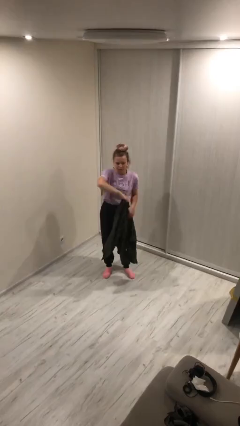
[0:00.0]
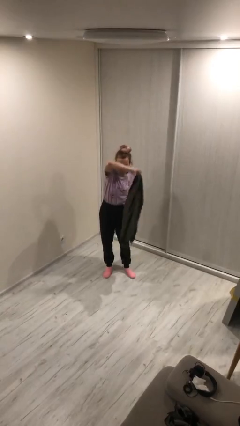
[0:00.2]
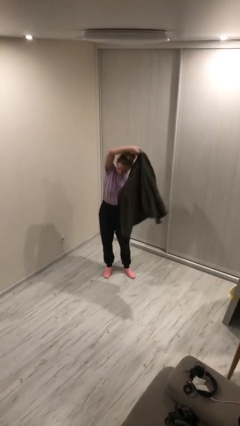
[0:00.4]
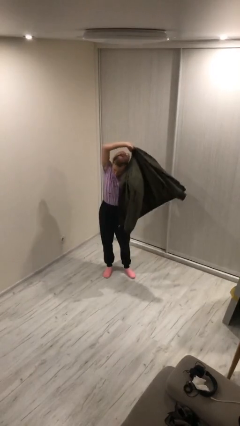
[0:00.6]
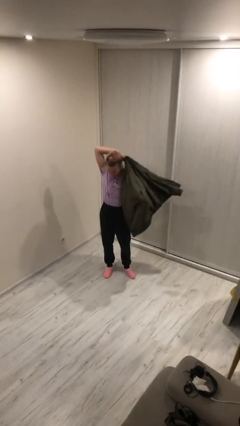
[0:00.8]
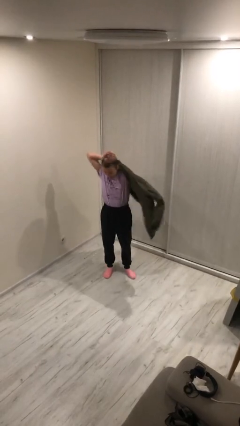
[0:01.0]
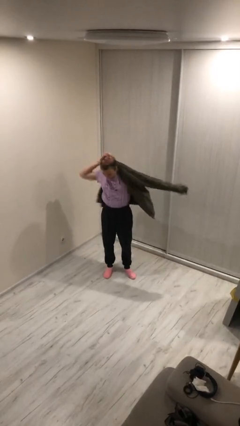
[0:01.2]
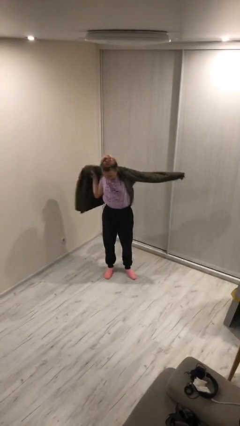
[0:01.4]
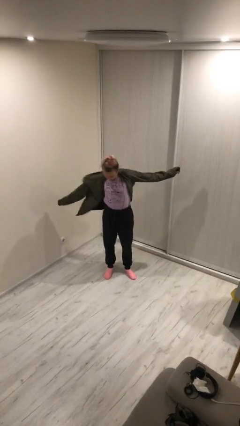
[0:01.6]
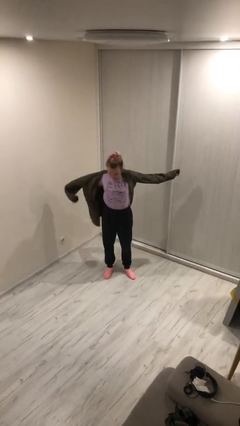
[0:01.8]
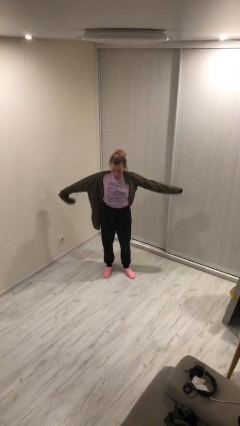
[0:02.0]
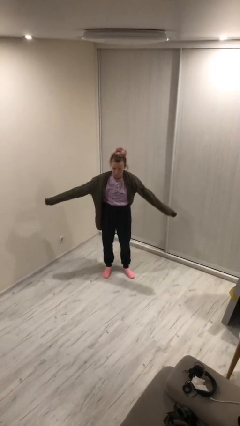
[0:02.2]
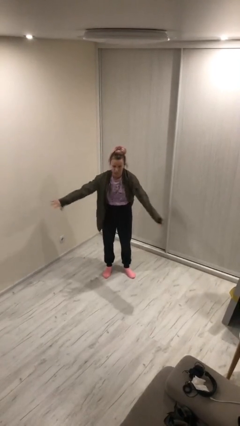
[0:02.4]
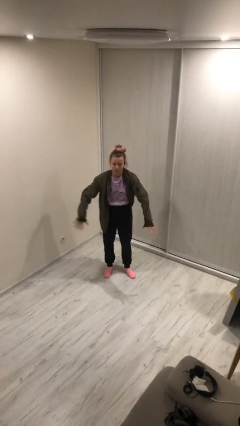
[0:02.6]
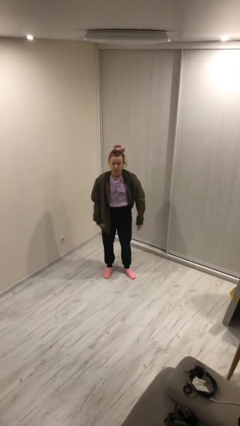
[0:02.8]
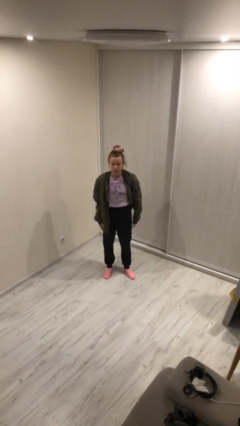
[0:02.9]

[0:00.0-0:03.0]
person puts on jacket

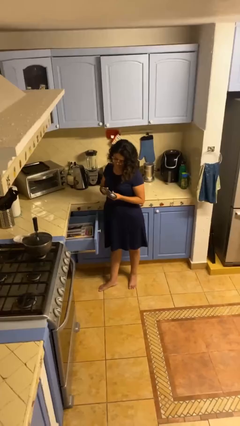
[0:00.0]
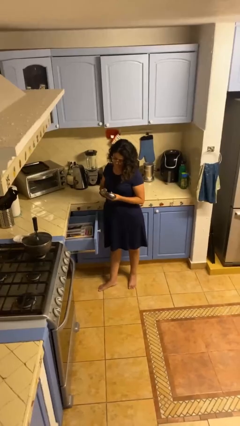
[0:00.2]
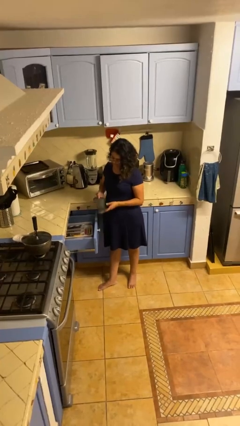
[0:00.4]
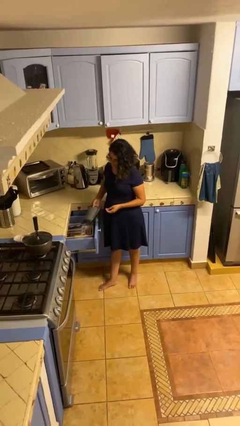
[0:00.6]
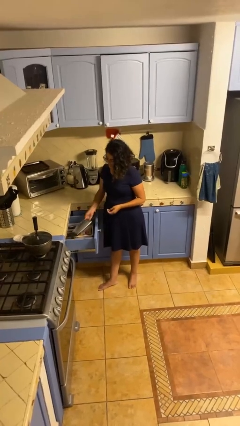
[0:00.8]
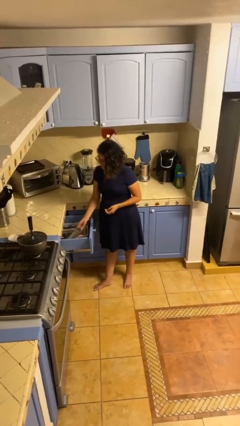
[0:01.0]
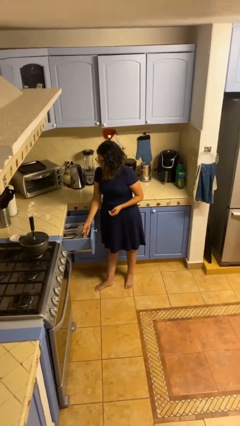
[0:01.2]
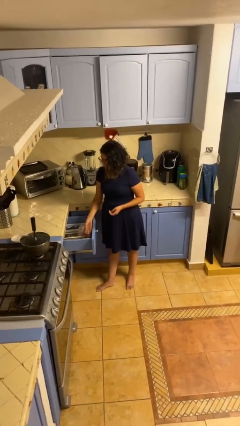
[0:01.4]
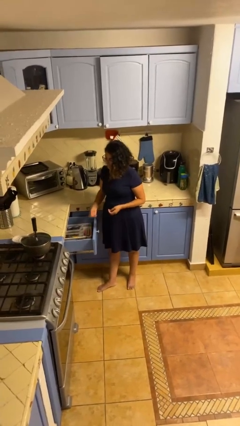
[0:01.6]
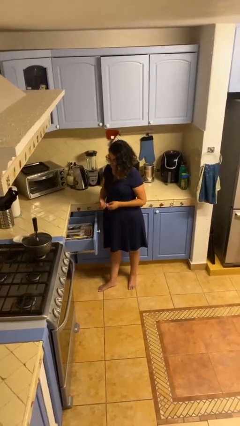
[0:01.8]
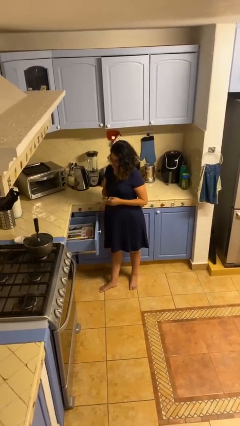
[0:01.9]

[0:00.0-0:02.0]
person puts object into kitchen drawer

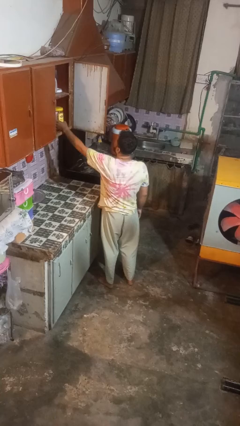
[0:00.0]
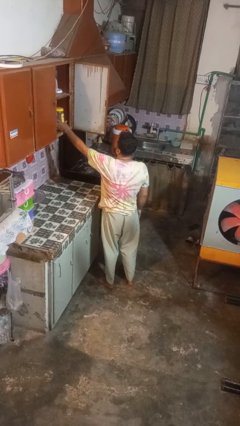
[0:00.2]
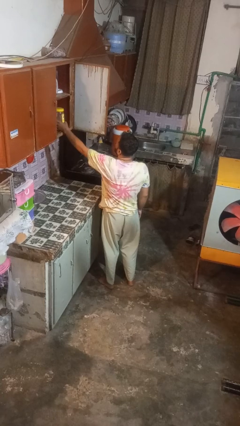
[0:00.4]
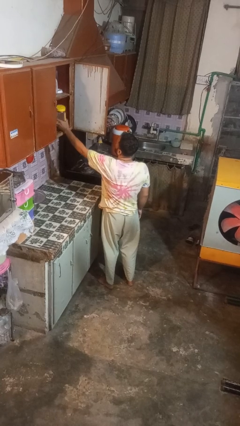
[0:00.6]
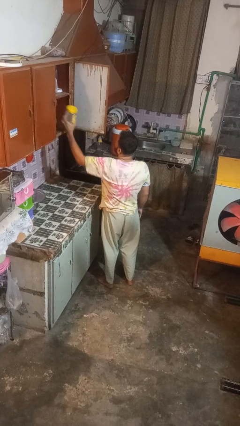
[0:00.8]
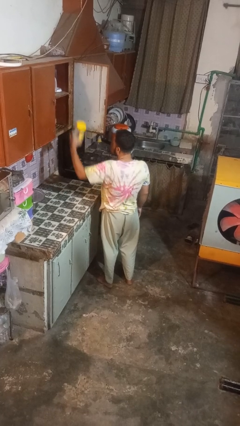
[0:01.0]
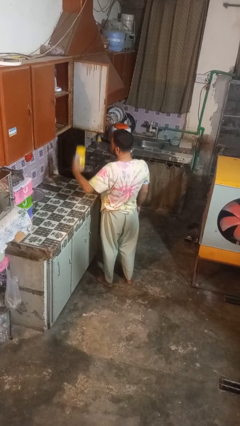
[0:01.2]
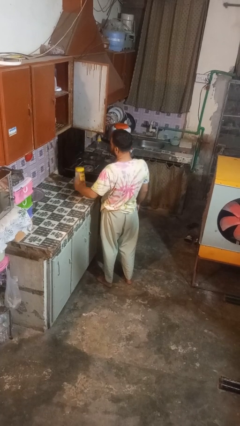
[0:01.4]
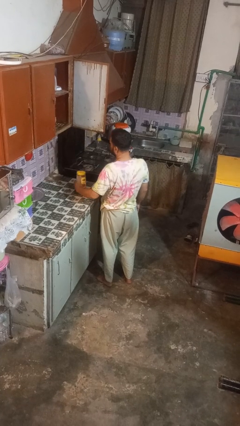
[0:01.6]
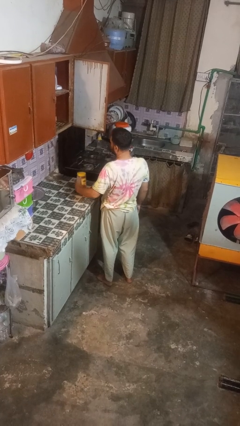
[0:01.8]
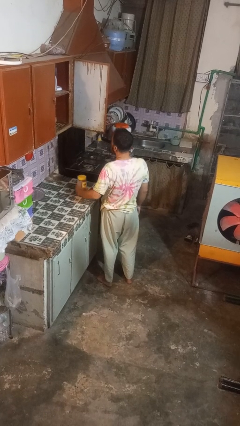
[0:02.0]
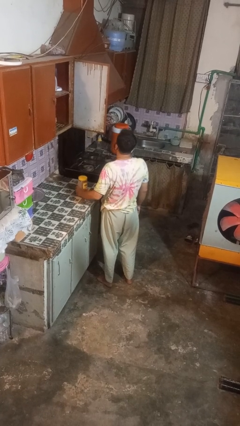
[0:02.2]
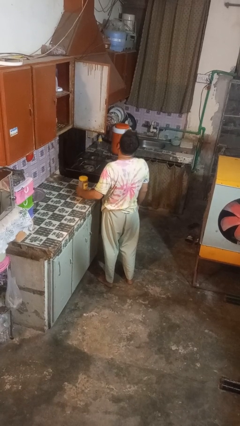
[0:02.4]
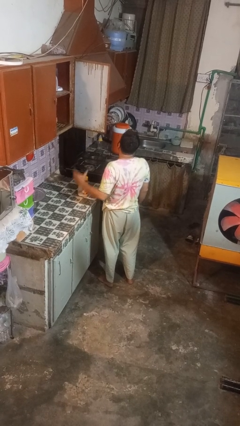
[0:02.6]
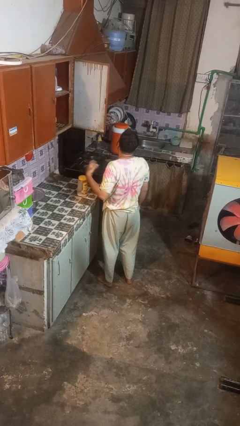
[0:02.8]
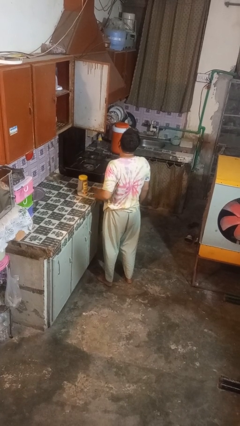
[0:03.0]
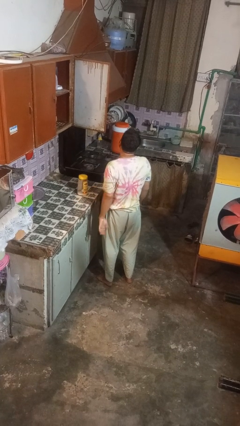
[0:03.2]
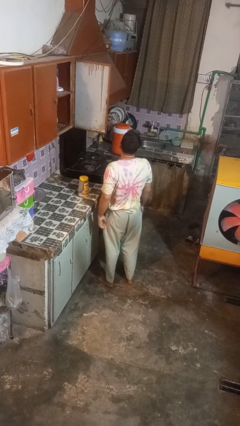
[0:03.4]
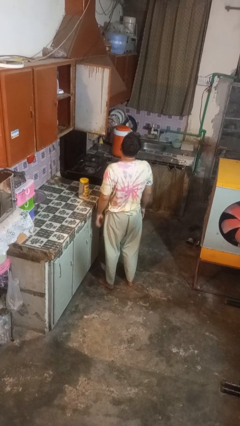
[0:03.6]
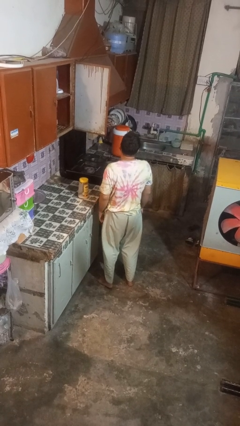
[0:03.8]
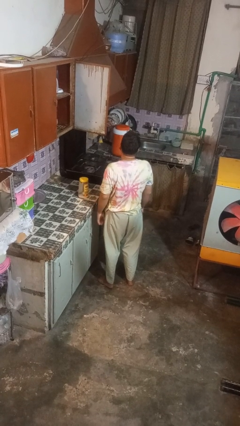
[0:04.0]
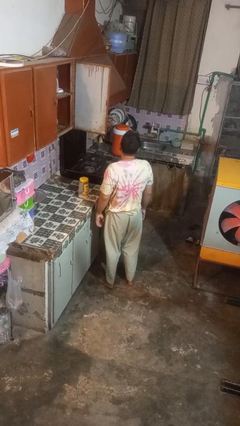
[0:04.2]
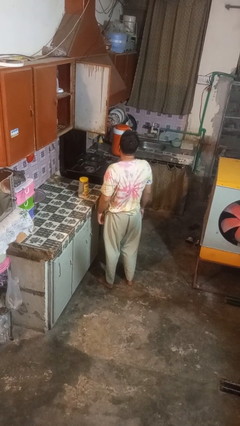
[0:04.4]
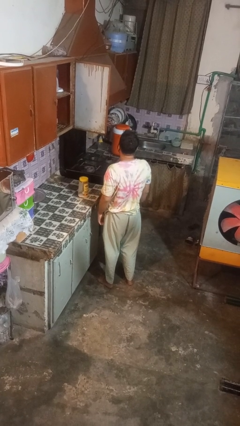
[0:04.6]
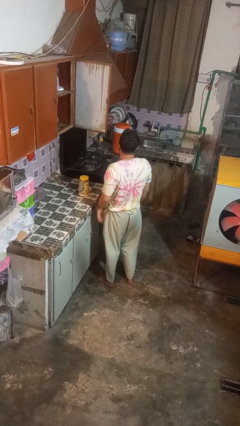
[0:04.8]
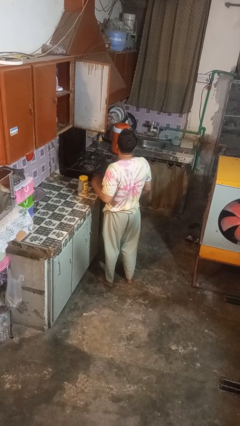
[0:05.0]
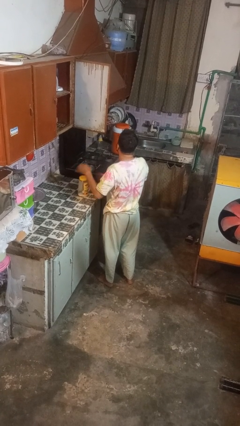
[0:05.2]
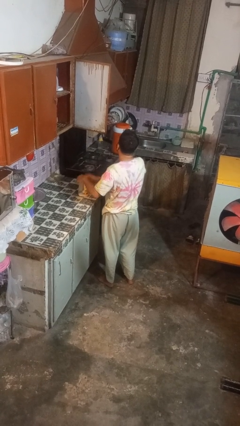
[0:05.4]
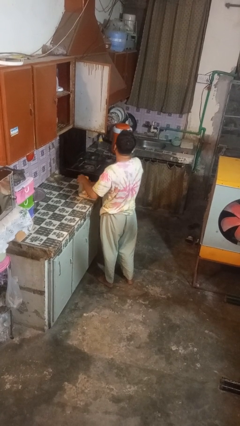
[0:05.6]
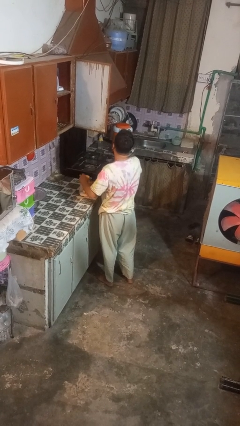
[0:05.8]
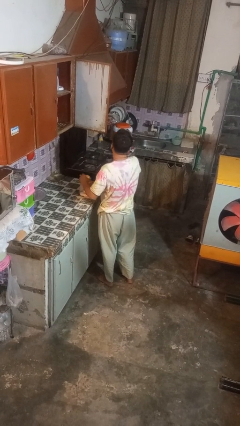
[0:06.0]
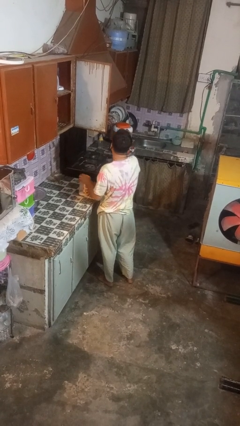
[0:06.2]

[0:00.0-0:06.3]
person takes object from cabinet

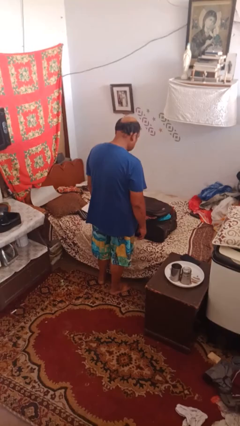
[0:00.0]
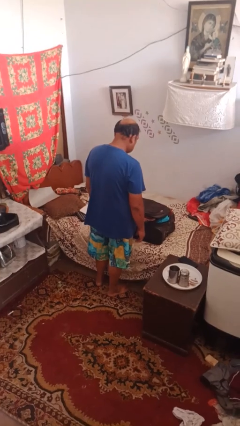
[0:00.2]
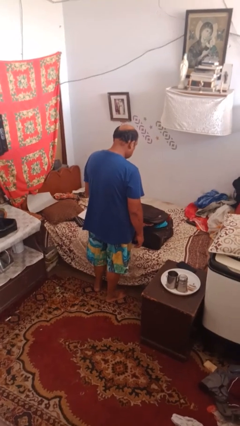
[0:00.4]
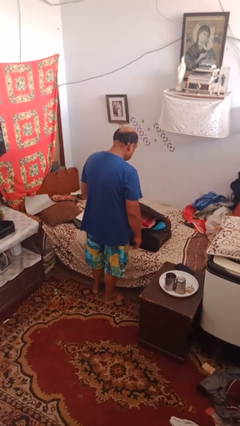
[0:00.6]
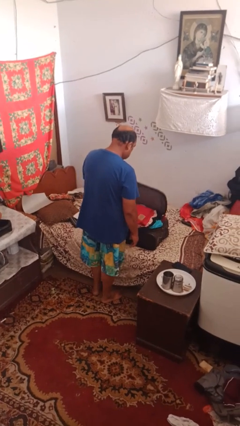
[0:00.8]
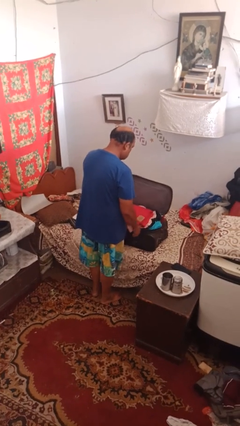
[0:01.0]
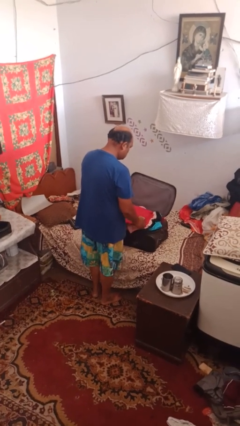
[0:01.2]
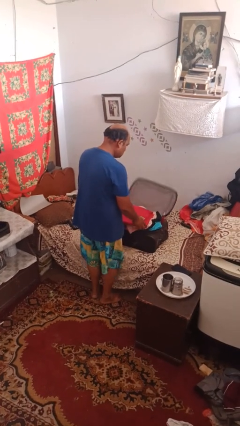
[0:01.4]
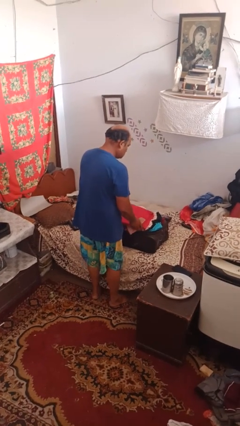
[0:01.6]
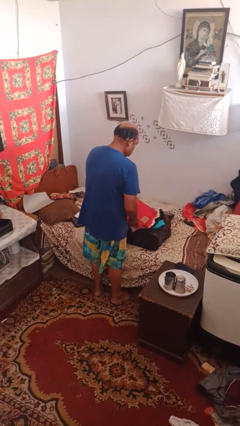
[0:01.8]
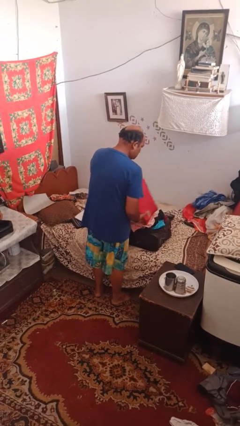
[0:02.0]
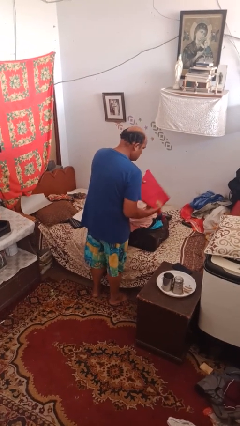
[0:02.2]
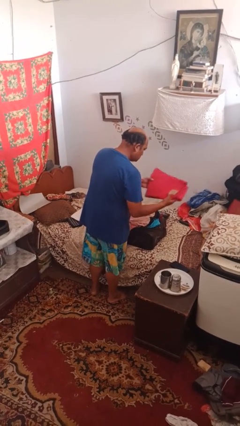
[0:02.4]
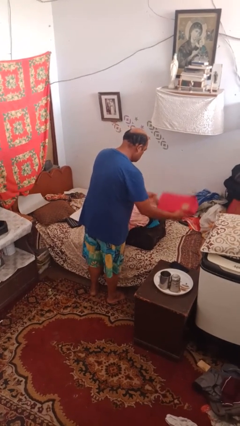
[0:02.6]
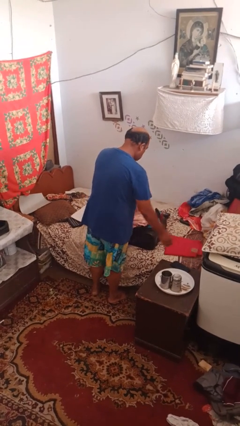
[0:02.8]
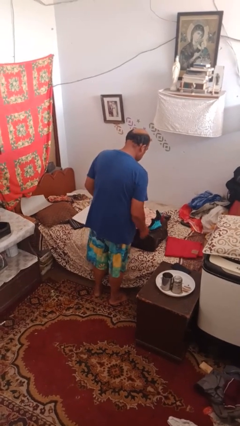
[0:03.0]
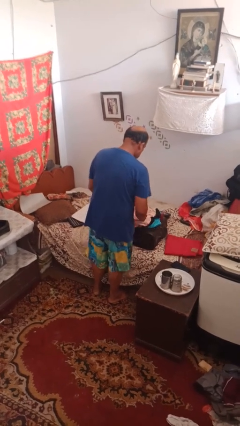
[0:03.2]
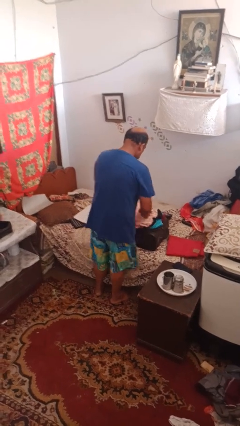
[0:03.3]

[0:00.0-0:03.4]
person unloads clothes from suitcase

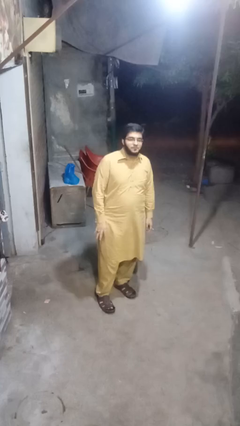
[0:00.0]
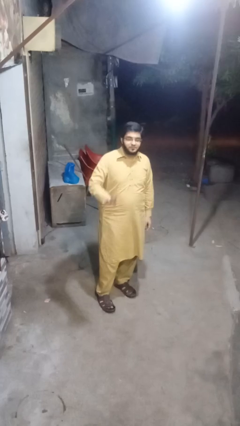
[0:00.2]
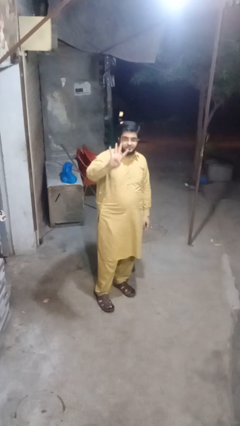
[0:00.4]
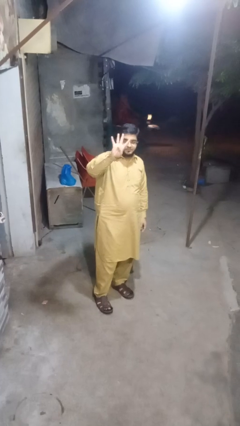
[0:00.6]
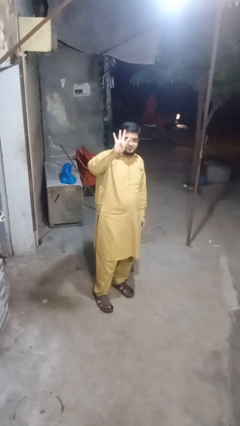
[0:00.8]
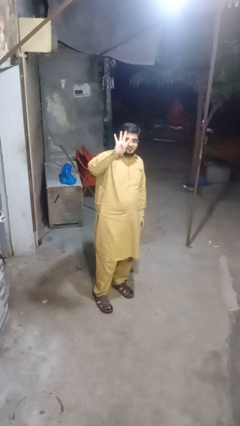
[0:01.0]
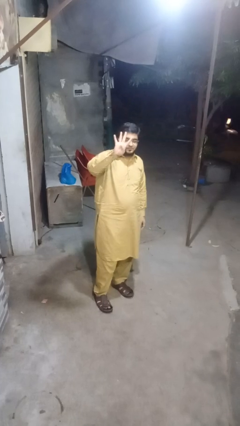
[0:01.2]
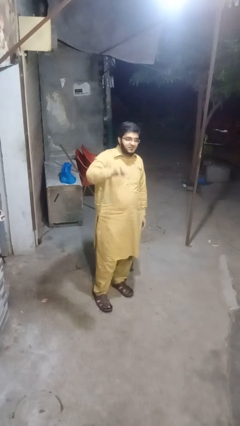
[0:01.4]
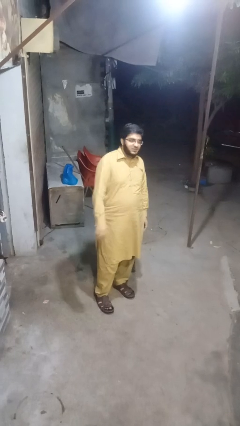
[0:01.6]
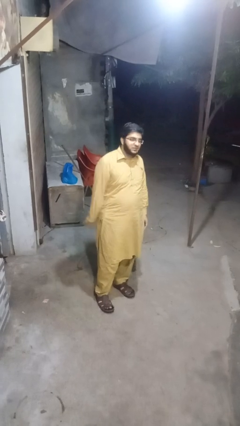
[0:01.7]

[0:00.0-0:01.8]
person gestures number four

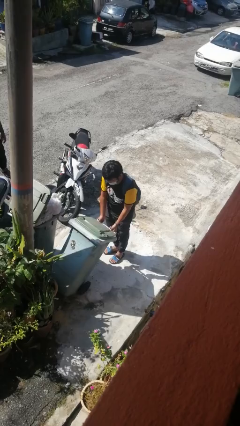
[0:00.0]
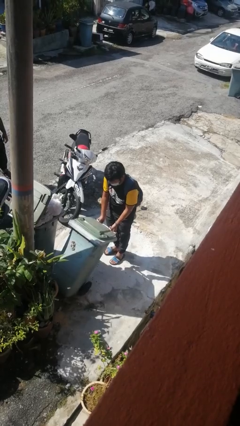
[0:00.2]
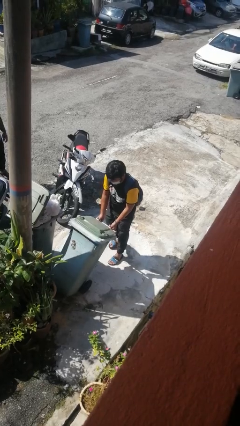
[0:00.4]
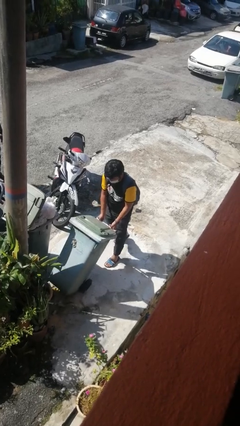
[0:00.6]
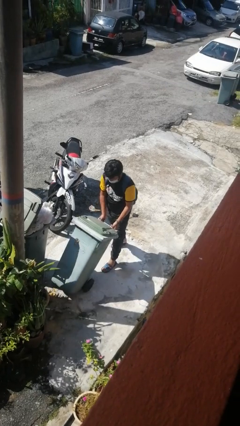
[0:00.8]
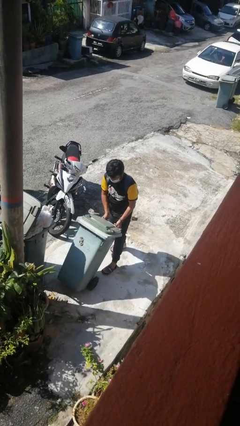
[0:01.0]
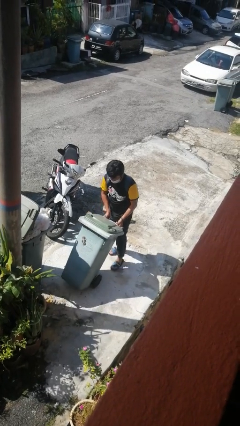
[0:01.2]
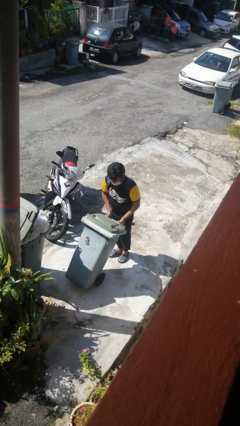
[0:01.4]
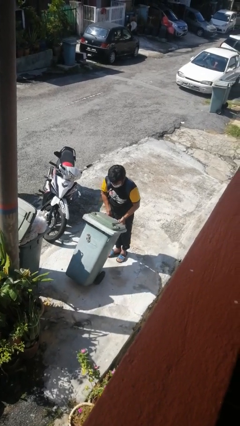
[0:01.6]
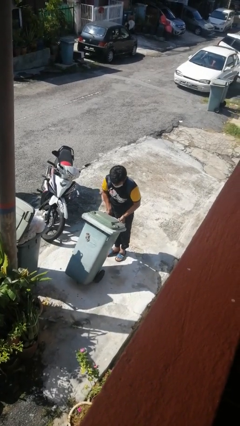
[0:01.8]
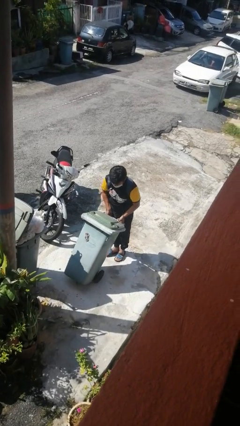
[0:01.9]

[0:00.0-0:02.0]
person pulls wheeled trashcan
